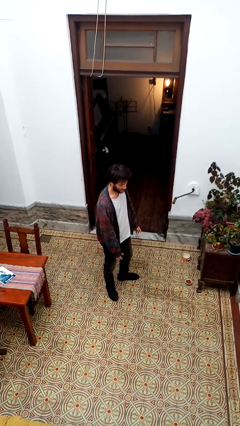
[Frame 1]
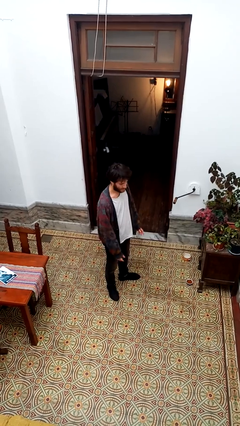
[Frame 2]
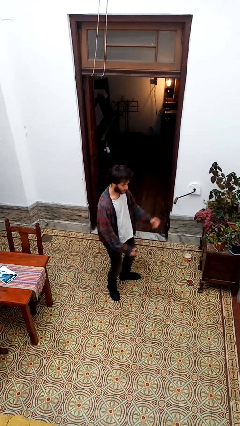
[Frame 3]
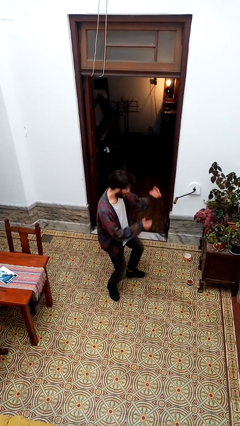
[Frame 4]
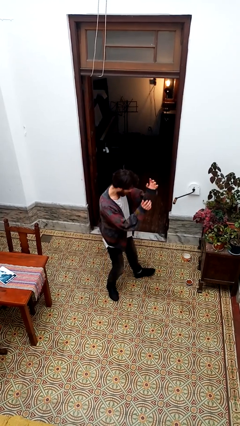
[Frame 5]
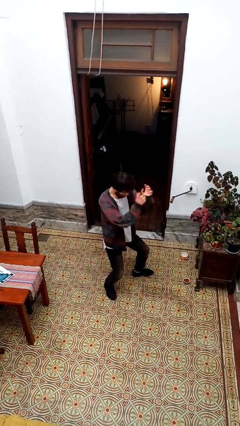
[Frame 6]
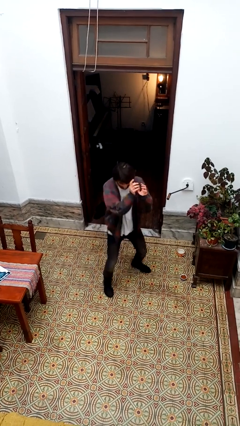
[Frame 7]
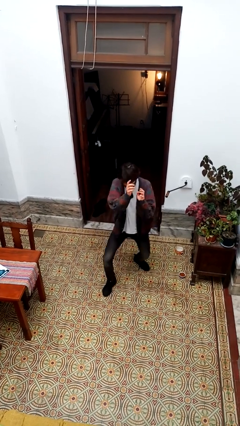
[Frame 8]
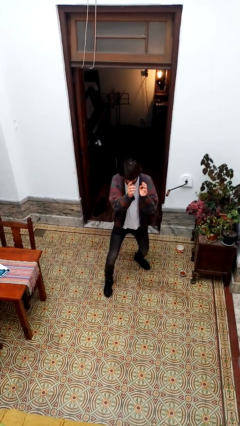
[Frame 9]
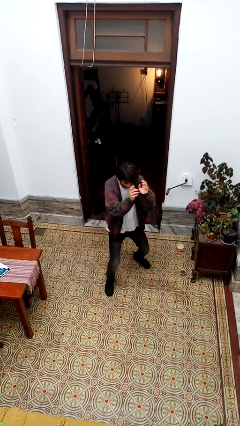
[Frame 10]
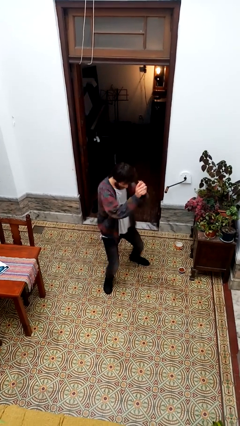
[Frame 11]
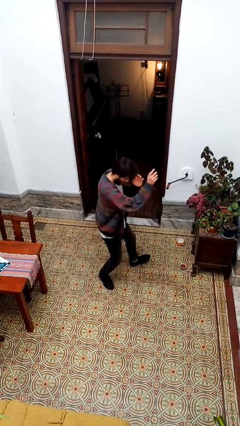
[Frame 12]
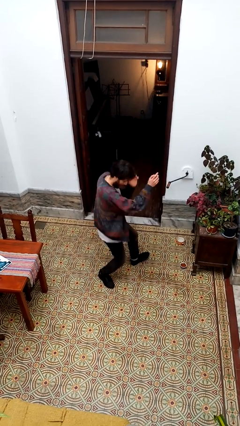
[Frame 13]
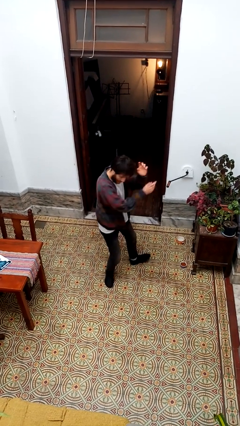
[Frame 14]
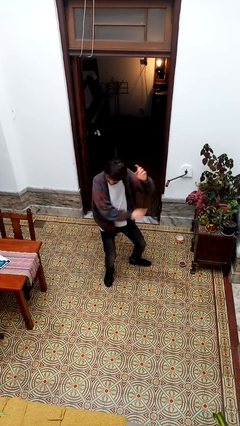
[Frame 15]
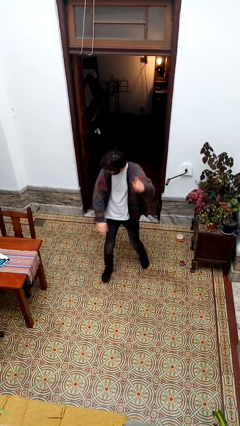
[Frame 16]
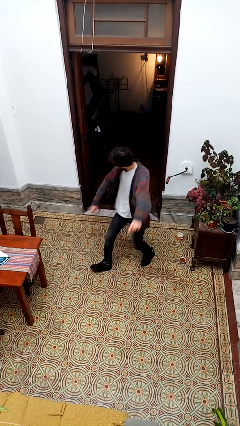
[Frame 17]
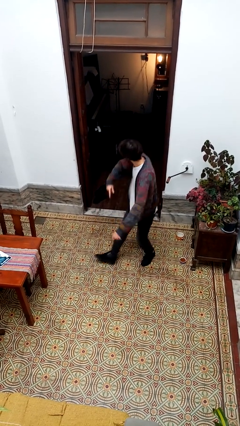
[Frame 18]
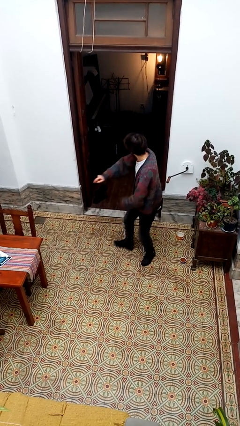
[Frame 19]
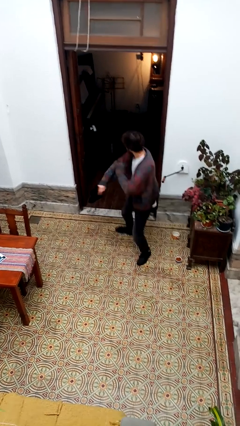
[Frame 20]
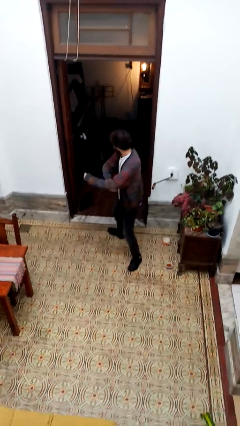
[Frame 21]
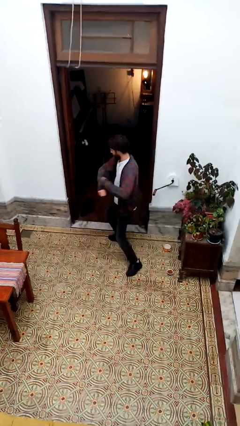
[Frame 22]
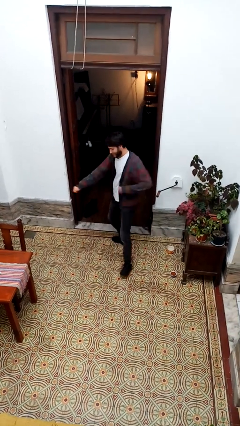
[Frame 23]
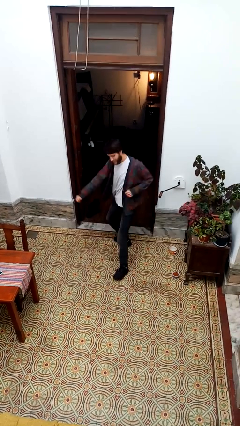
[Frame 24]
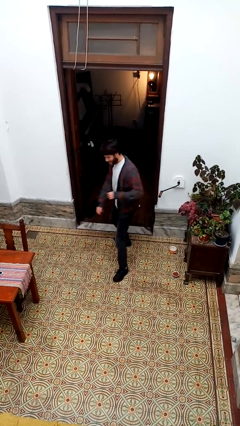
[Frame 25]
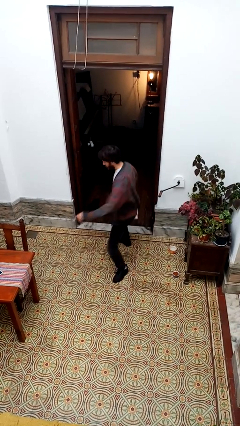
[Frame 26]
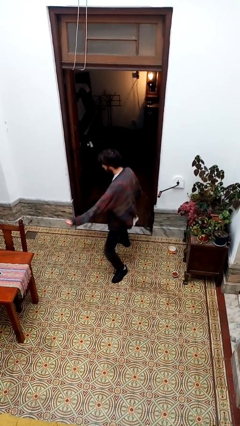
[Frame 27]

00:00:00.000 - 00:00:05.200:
person dances in place

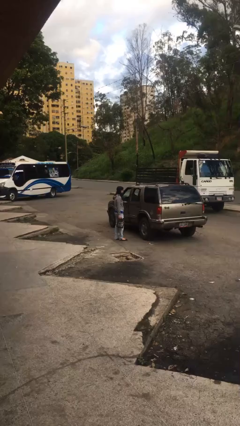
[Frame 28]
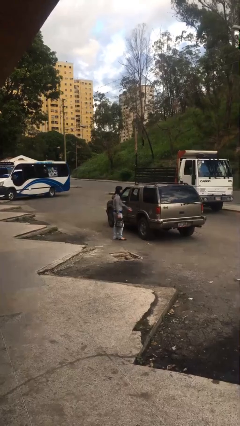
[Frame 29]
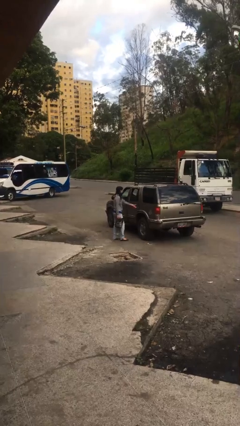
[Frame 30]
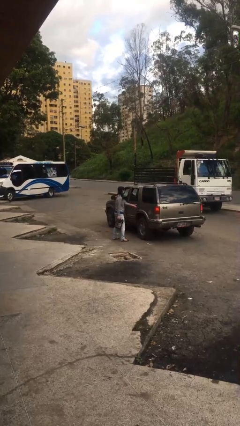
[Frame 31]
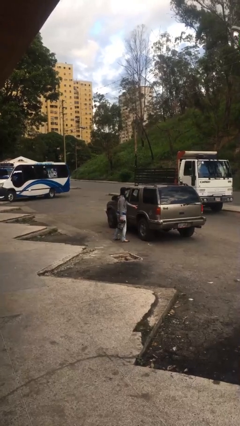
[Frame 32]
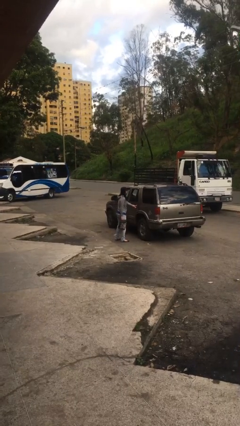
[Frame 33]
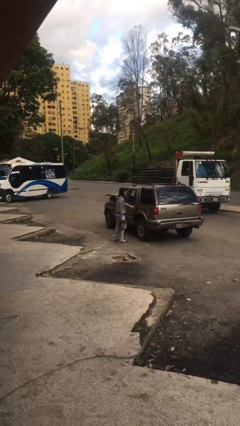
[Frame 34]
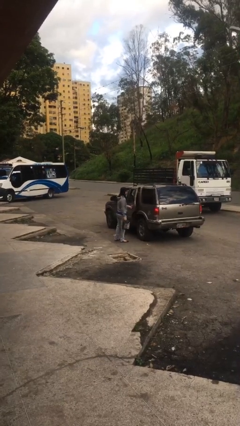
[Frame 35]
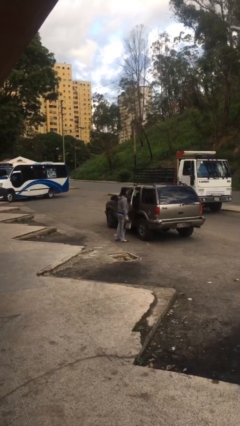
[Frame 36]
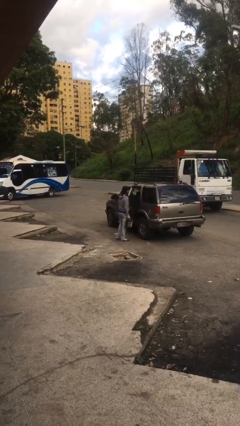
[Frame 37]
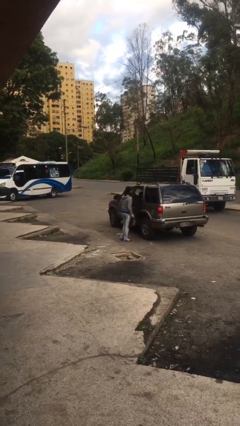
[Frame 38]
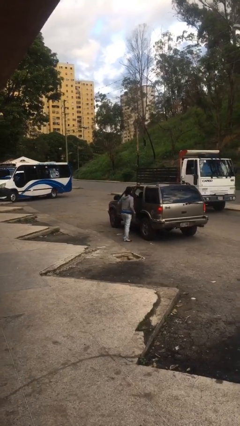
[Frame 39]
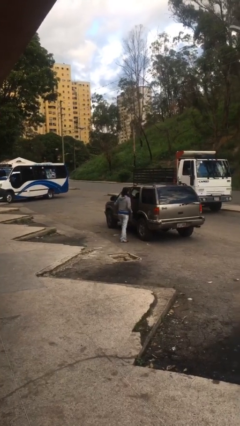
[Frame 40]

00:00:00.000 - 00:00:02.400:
person opens car door

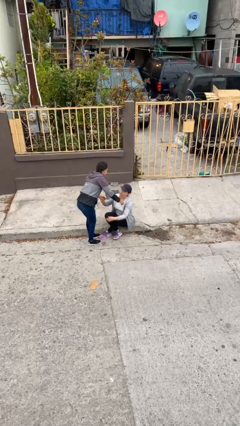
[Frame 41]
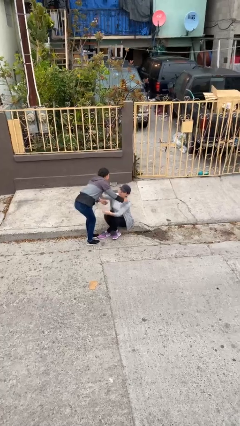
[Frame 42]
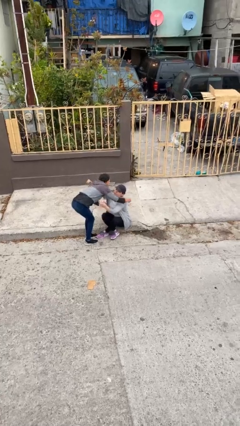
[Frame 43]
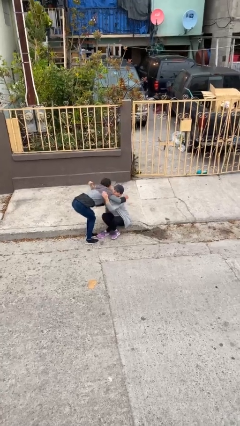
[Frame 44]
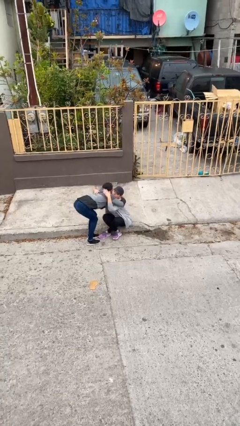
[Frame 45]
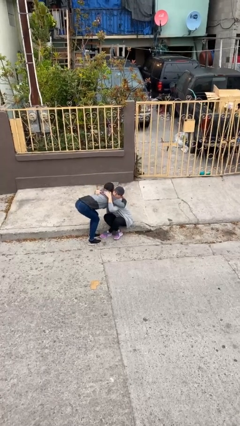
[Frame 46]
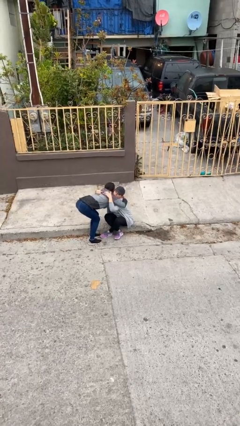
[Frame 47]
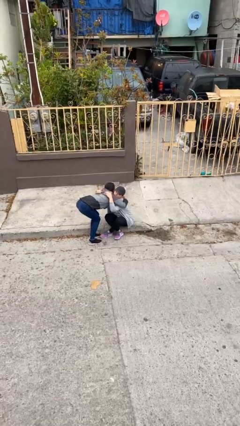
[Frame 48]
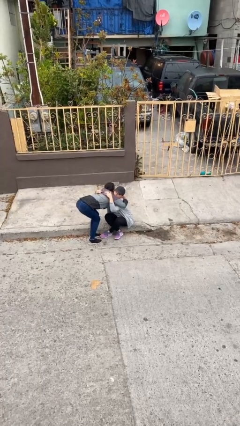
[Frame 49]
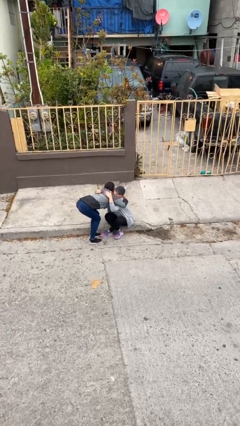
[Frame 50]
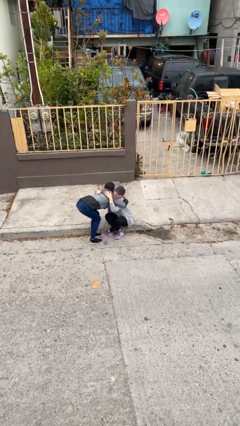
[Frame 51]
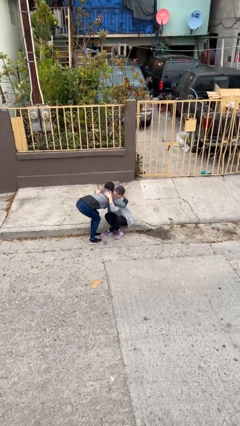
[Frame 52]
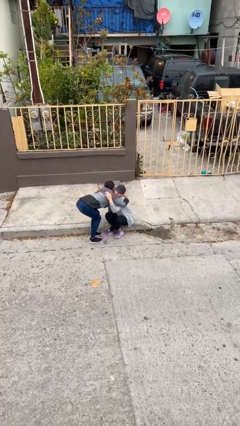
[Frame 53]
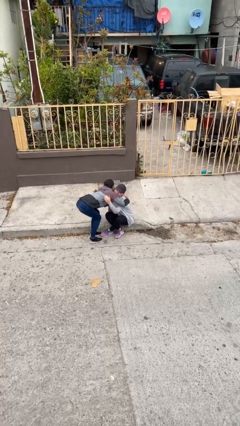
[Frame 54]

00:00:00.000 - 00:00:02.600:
person embraces person

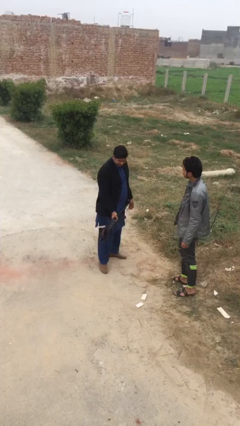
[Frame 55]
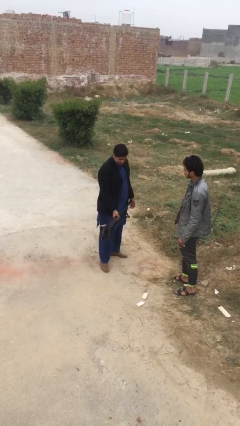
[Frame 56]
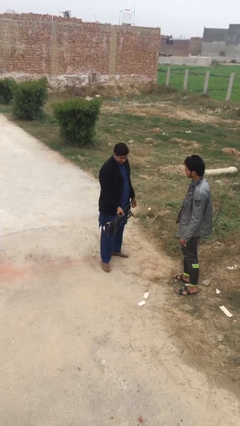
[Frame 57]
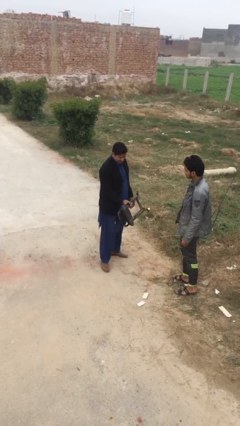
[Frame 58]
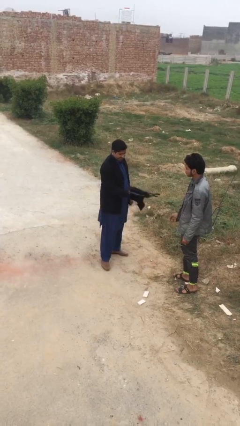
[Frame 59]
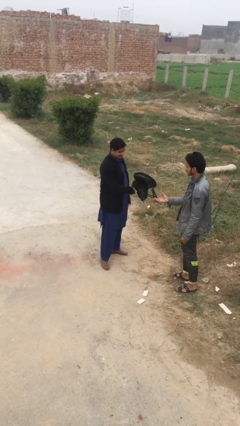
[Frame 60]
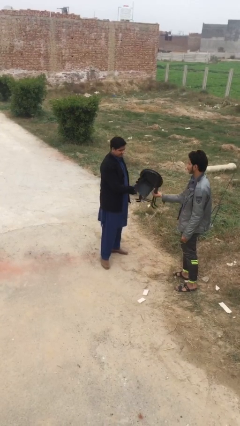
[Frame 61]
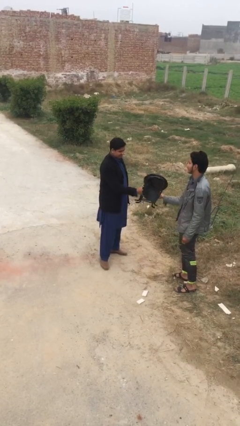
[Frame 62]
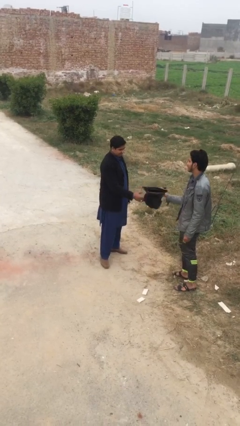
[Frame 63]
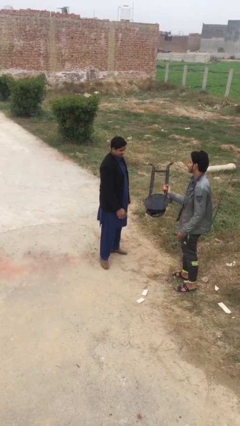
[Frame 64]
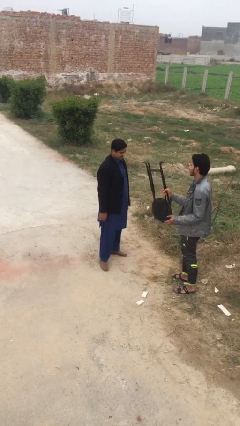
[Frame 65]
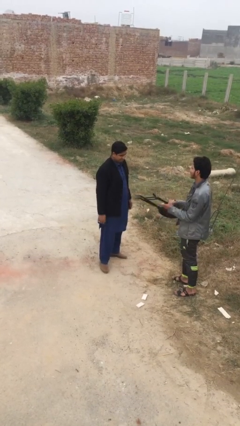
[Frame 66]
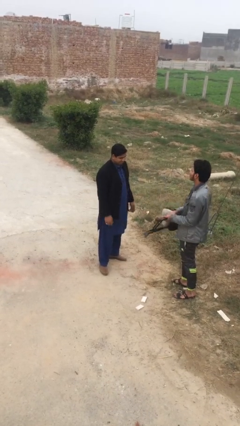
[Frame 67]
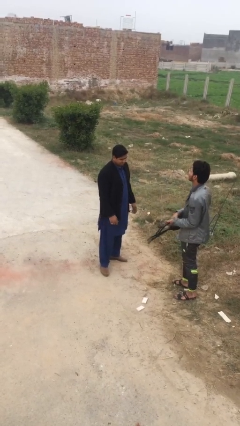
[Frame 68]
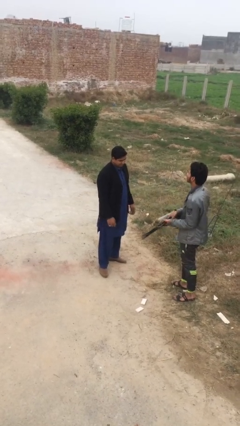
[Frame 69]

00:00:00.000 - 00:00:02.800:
person transfers object to person

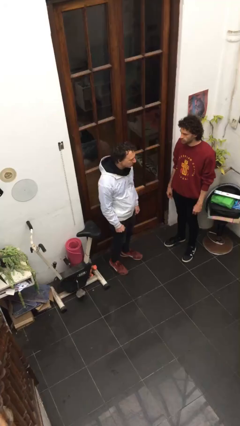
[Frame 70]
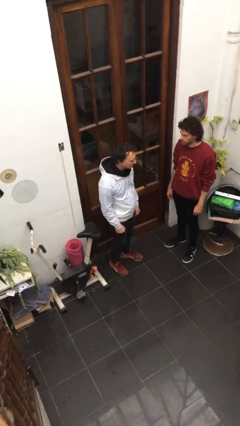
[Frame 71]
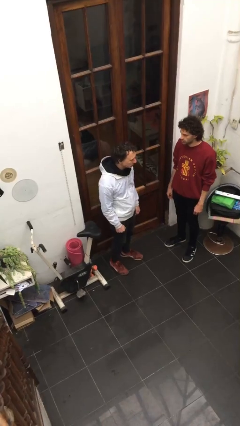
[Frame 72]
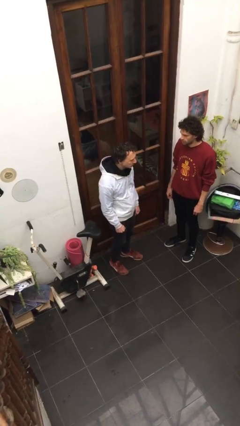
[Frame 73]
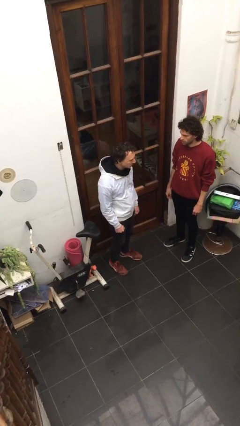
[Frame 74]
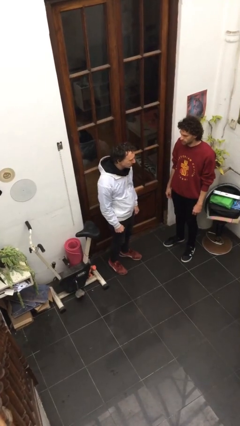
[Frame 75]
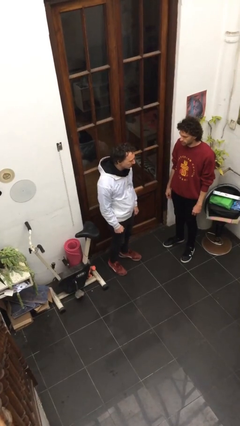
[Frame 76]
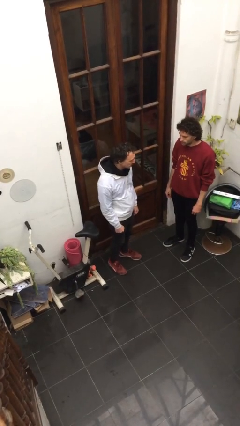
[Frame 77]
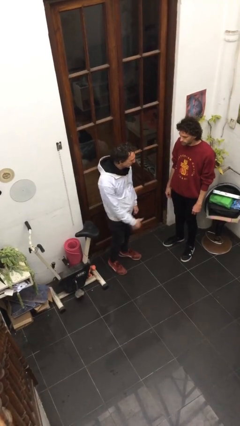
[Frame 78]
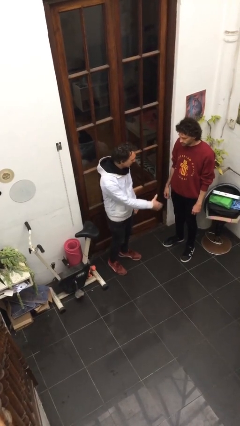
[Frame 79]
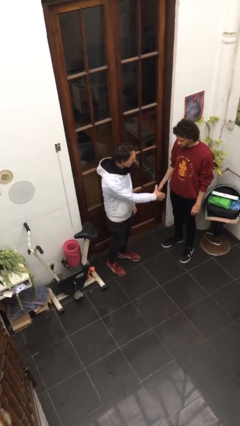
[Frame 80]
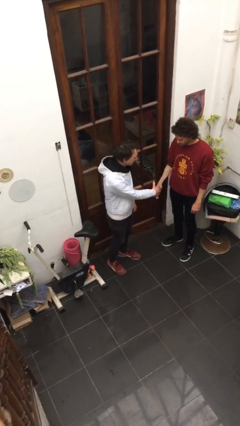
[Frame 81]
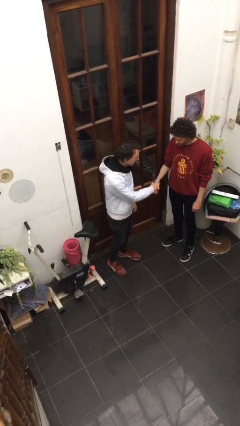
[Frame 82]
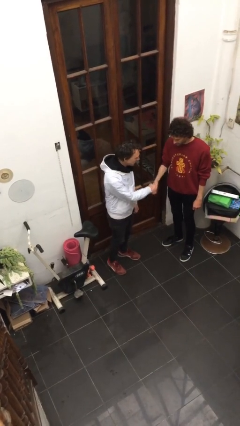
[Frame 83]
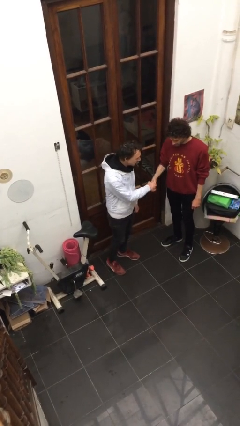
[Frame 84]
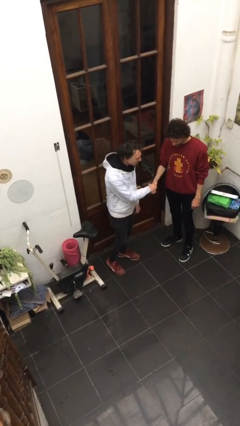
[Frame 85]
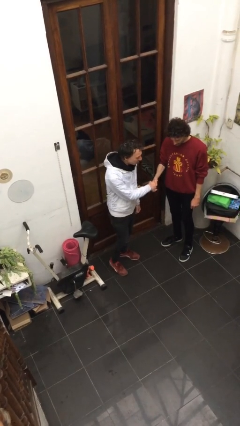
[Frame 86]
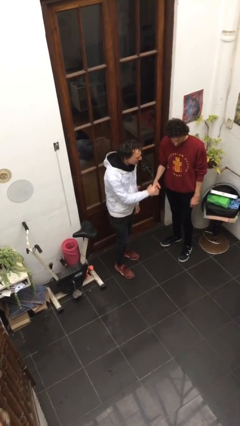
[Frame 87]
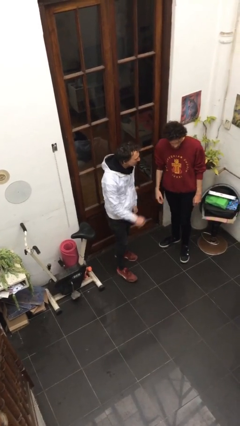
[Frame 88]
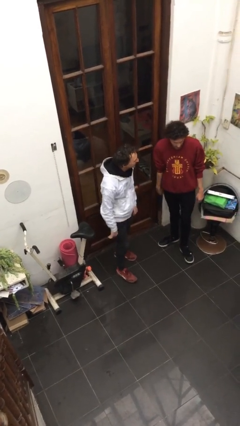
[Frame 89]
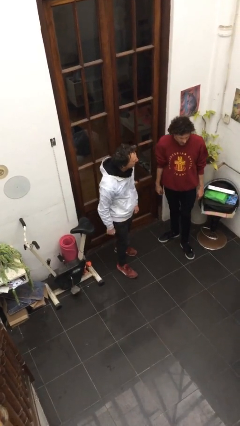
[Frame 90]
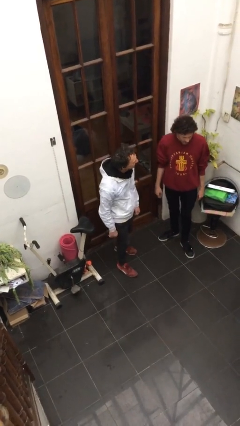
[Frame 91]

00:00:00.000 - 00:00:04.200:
person shakes hand
